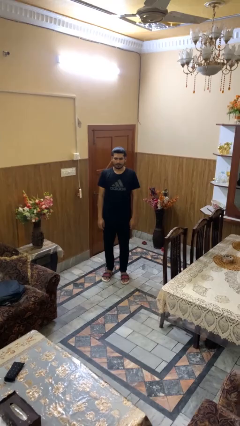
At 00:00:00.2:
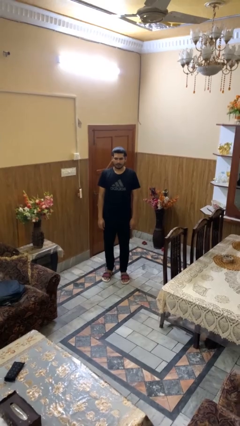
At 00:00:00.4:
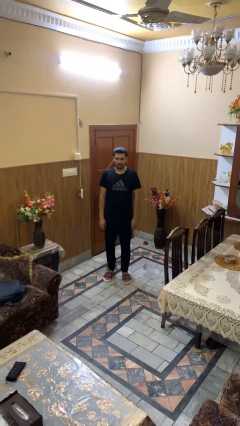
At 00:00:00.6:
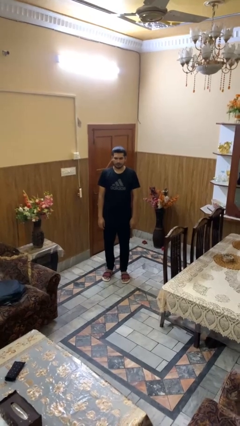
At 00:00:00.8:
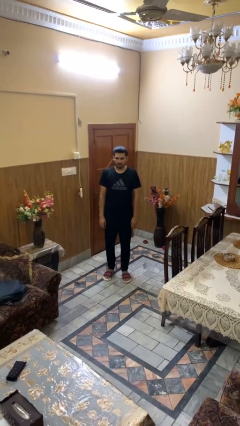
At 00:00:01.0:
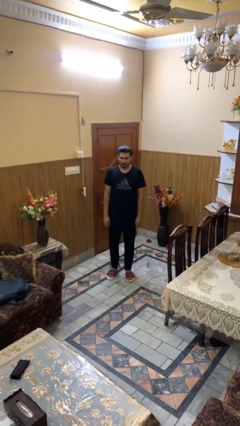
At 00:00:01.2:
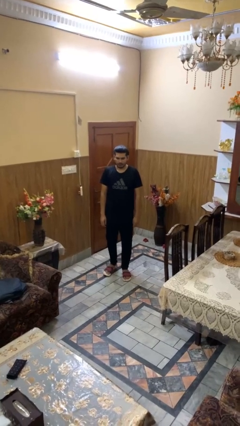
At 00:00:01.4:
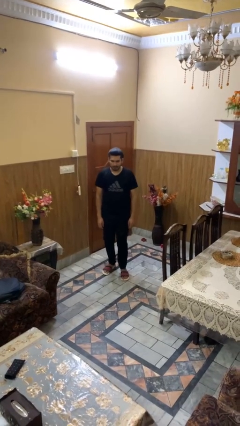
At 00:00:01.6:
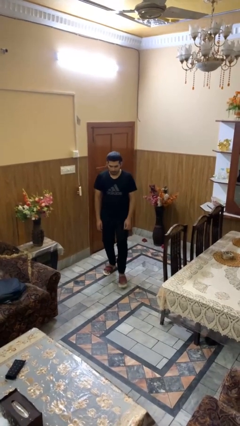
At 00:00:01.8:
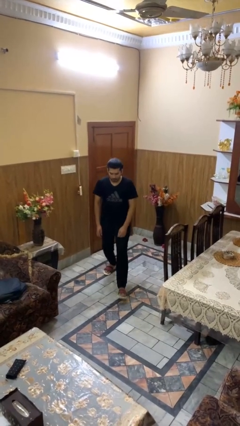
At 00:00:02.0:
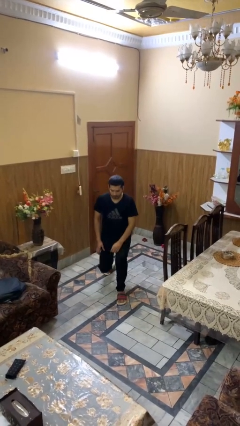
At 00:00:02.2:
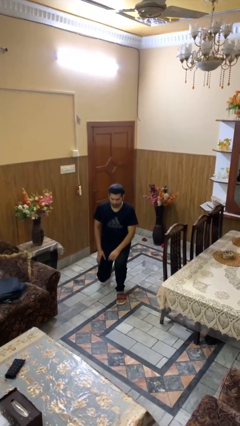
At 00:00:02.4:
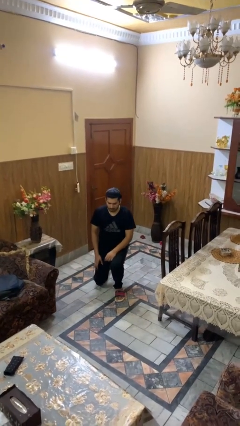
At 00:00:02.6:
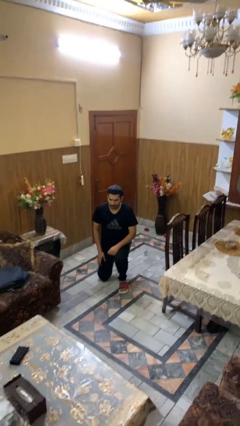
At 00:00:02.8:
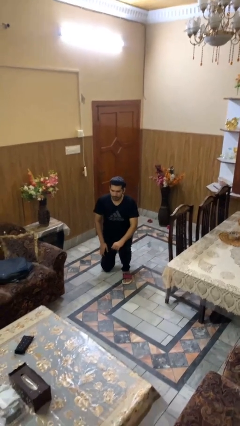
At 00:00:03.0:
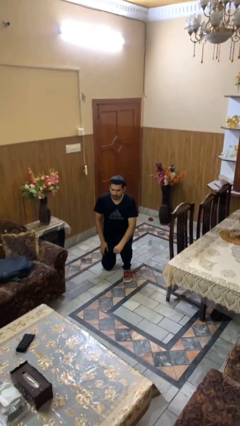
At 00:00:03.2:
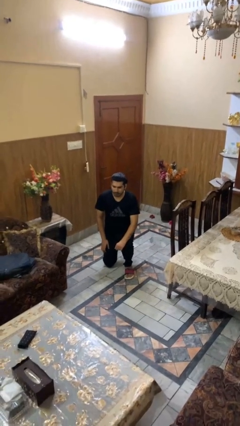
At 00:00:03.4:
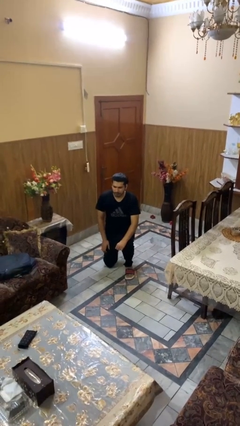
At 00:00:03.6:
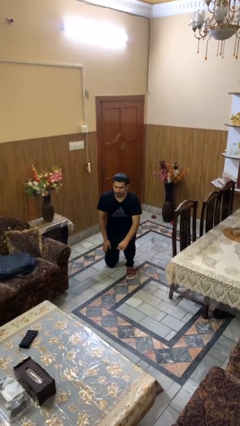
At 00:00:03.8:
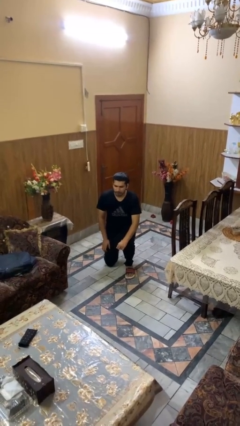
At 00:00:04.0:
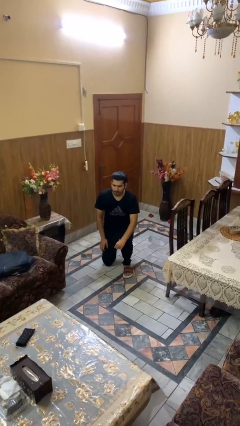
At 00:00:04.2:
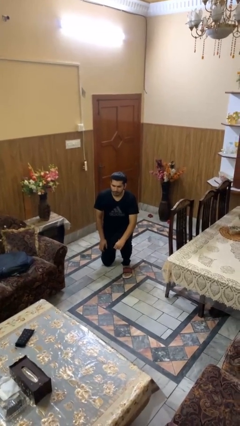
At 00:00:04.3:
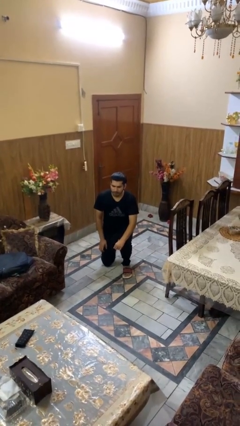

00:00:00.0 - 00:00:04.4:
person kneels

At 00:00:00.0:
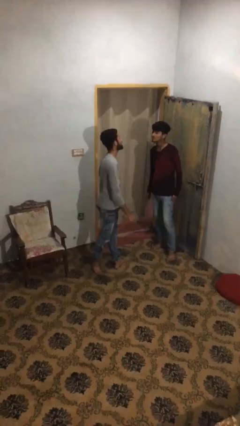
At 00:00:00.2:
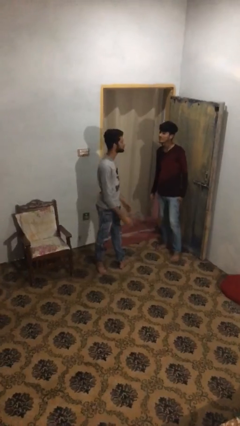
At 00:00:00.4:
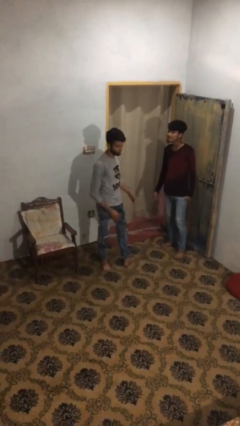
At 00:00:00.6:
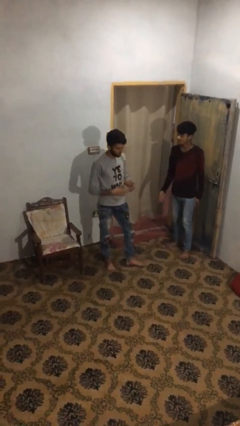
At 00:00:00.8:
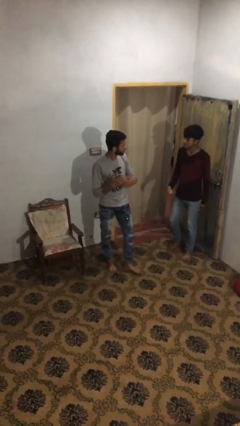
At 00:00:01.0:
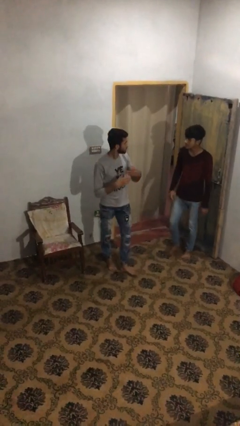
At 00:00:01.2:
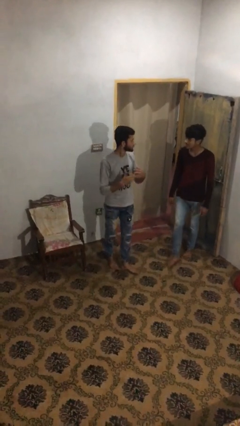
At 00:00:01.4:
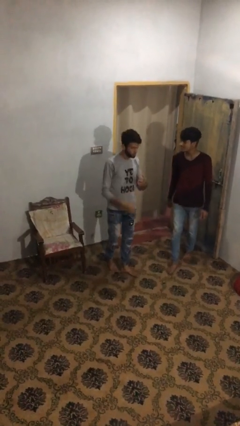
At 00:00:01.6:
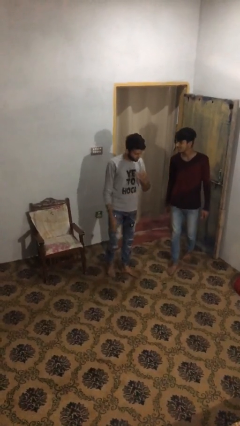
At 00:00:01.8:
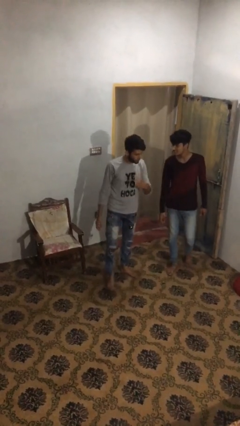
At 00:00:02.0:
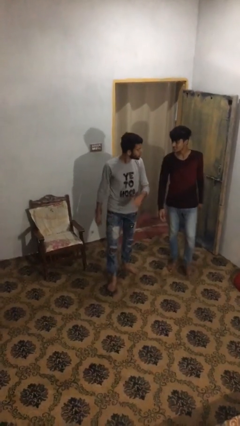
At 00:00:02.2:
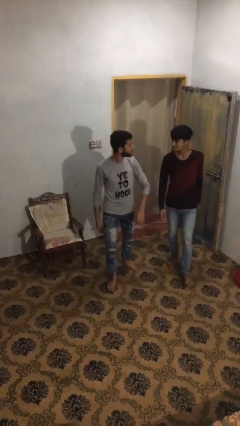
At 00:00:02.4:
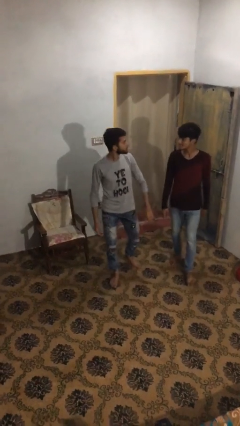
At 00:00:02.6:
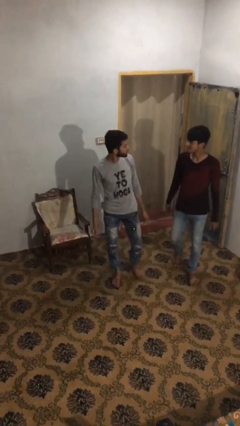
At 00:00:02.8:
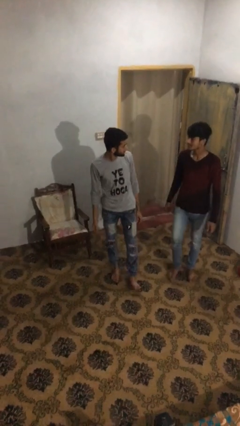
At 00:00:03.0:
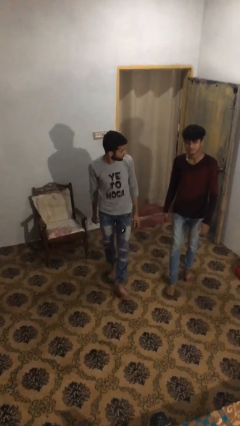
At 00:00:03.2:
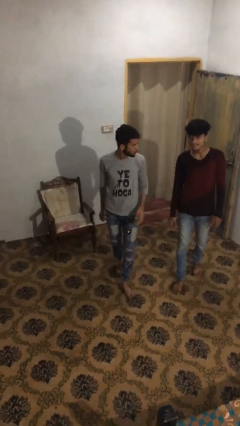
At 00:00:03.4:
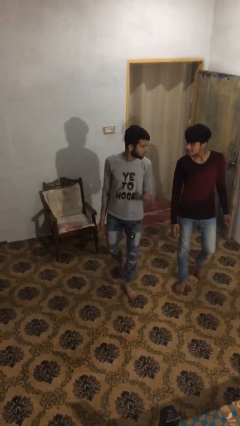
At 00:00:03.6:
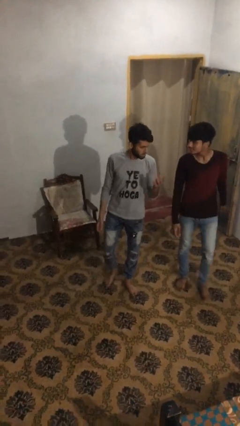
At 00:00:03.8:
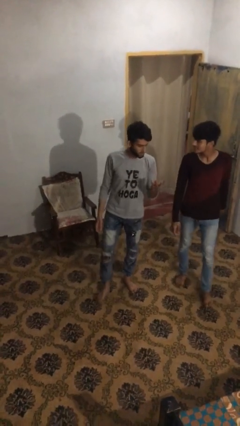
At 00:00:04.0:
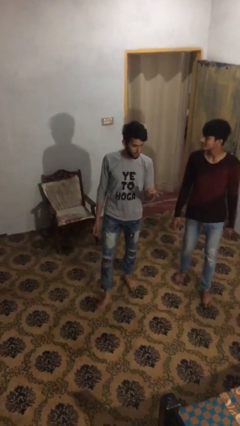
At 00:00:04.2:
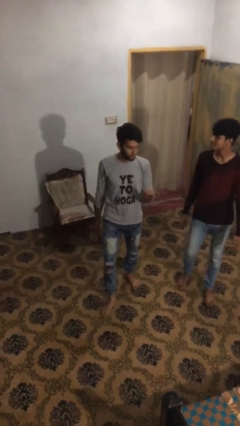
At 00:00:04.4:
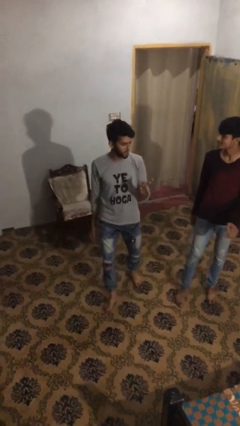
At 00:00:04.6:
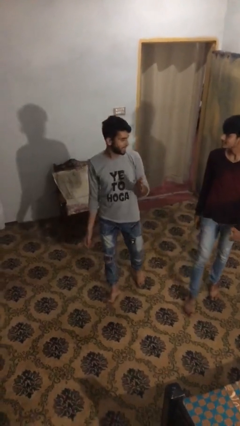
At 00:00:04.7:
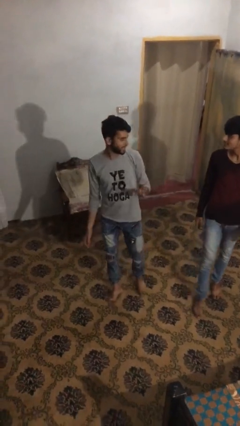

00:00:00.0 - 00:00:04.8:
person talks to person

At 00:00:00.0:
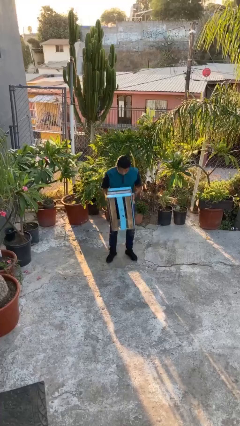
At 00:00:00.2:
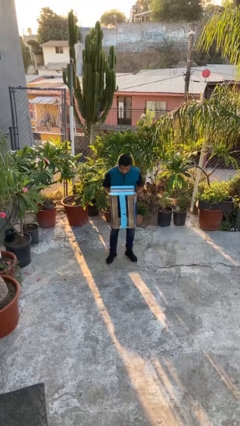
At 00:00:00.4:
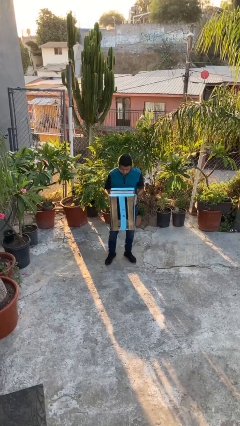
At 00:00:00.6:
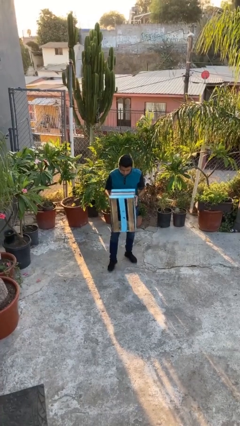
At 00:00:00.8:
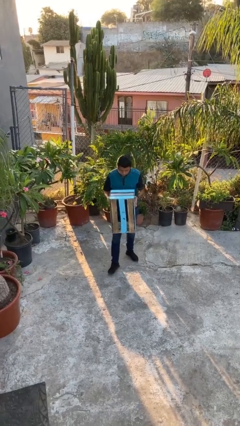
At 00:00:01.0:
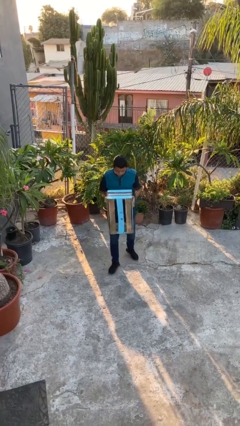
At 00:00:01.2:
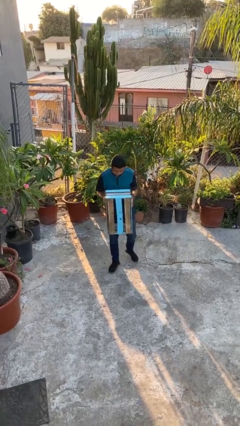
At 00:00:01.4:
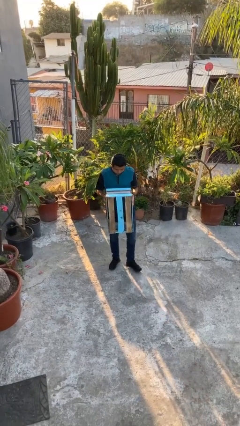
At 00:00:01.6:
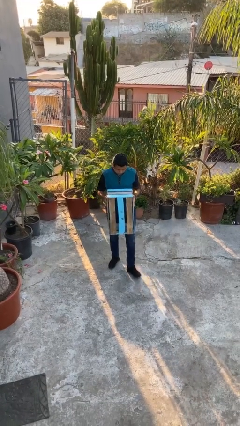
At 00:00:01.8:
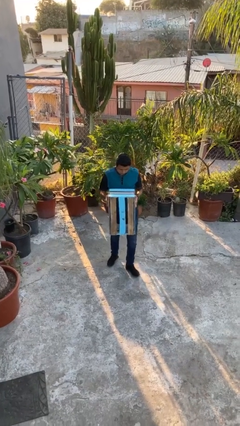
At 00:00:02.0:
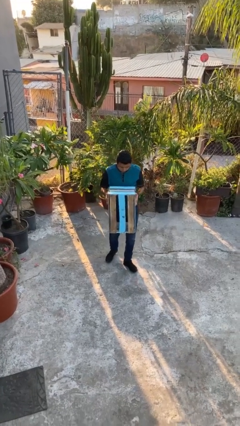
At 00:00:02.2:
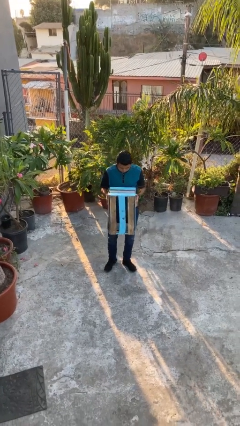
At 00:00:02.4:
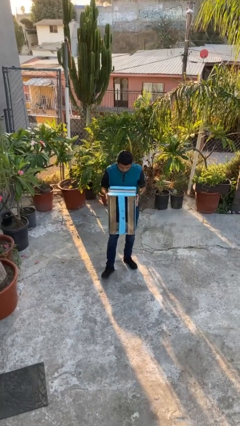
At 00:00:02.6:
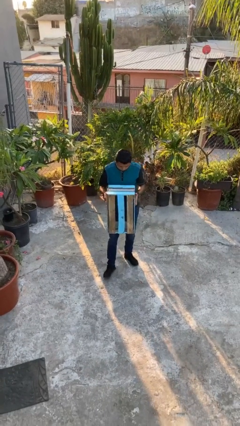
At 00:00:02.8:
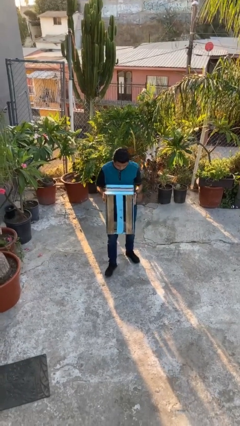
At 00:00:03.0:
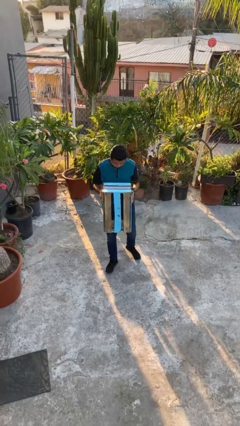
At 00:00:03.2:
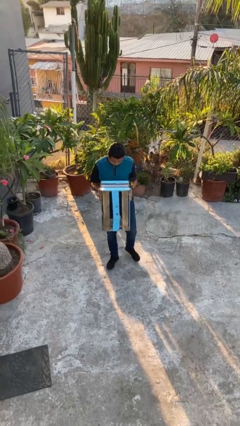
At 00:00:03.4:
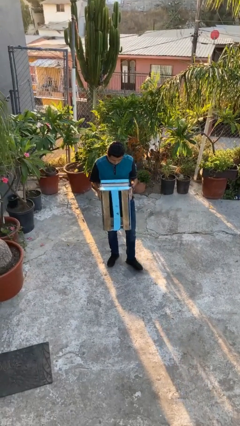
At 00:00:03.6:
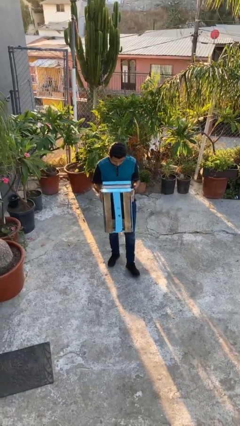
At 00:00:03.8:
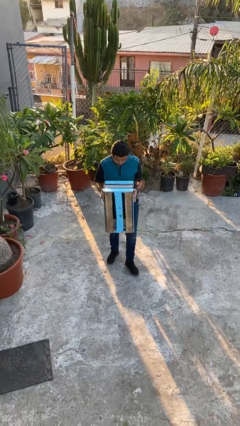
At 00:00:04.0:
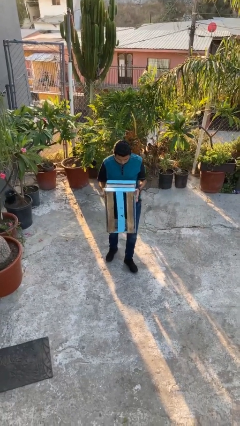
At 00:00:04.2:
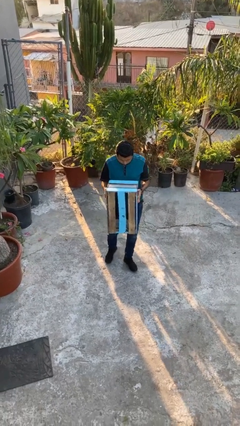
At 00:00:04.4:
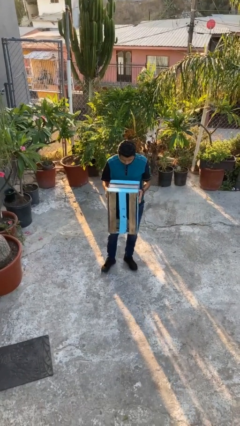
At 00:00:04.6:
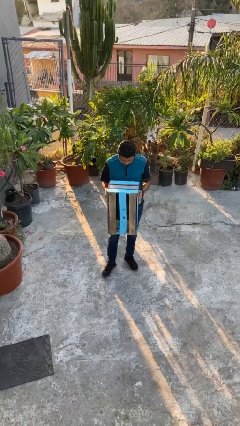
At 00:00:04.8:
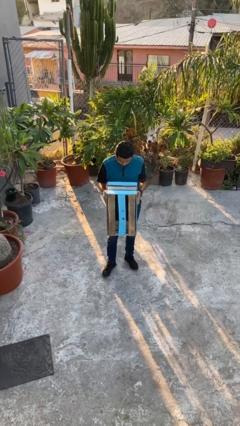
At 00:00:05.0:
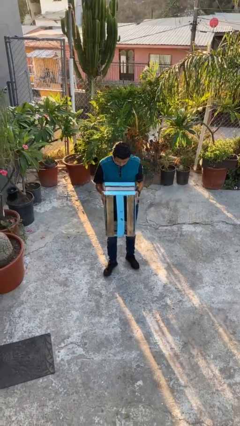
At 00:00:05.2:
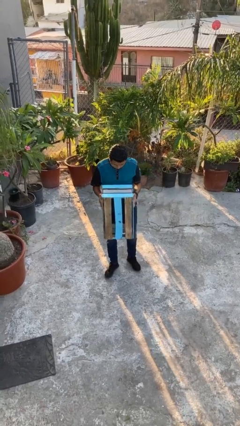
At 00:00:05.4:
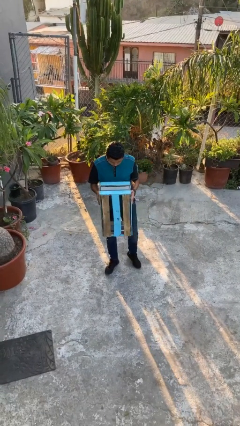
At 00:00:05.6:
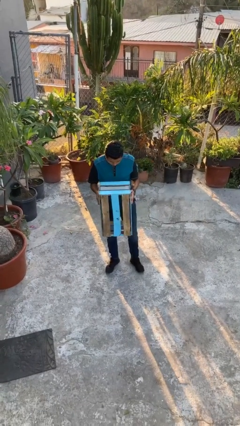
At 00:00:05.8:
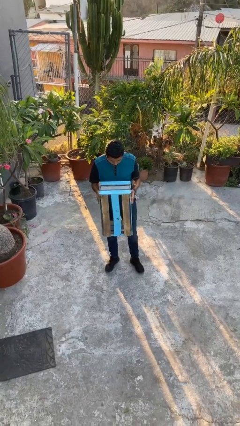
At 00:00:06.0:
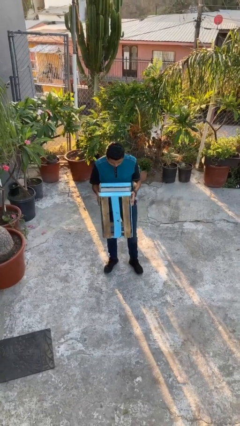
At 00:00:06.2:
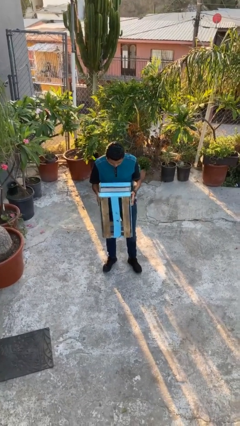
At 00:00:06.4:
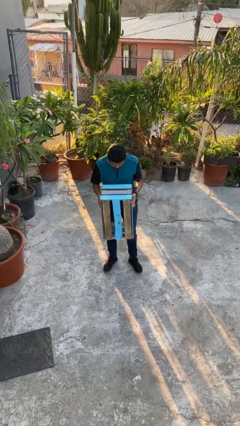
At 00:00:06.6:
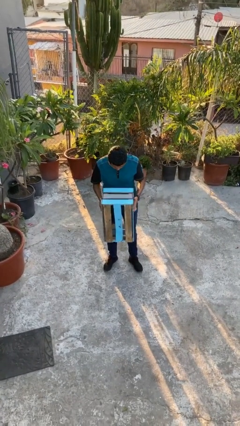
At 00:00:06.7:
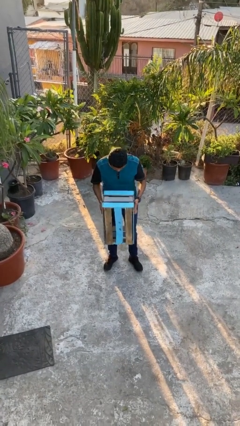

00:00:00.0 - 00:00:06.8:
person carries heavy object

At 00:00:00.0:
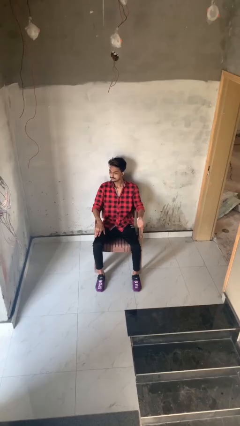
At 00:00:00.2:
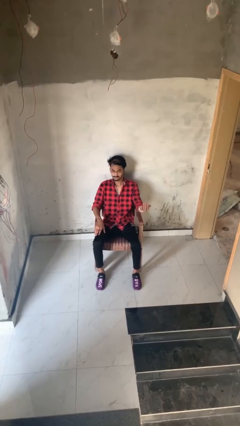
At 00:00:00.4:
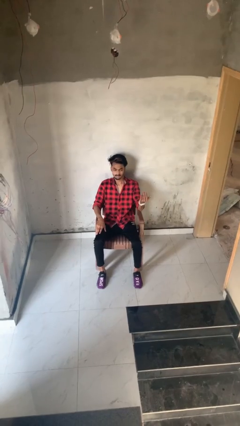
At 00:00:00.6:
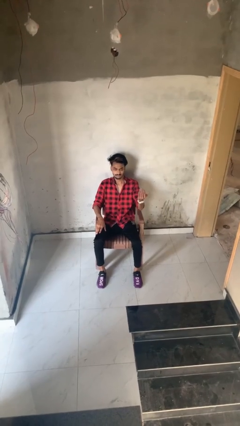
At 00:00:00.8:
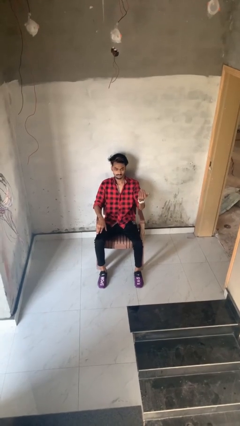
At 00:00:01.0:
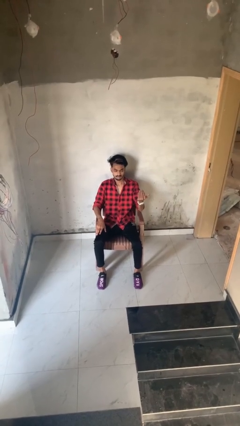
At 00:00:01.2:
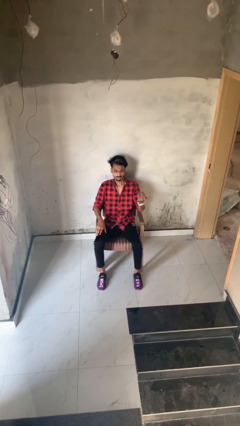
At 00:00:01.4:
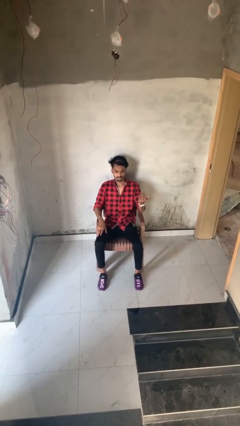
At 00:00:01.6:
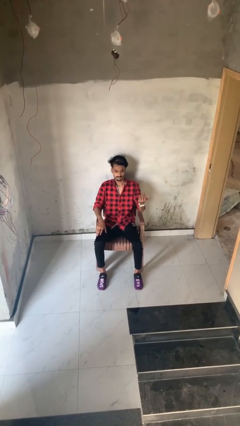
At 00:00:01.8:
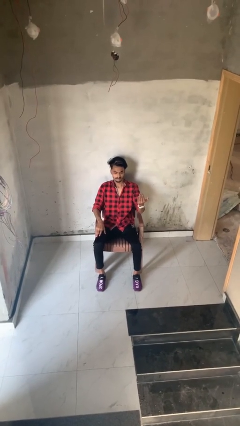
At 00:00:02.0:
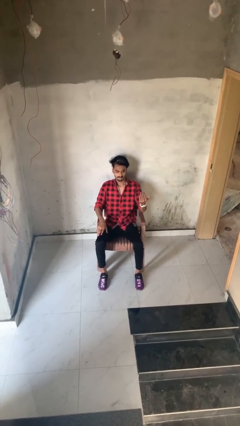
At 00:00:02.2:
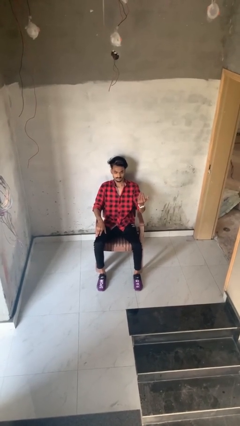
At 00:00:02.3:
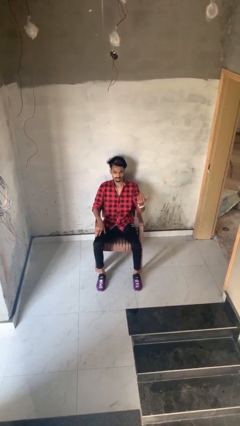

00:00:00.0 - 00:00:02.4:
person gestures come here
